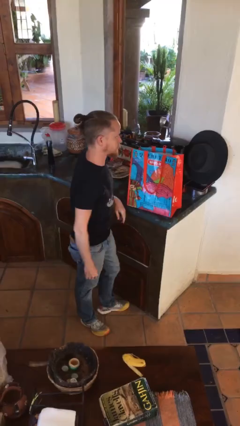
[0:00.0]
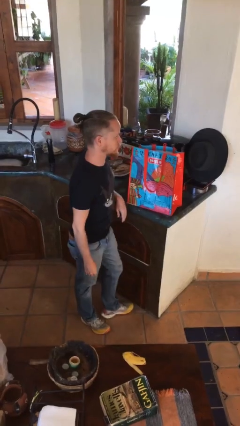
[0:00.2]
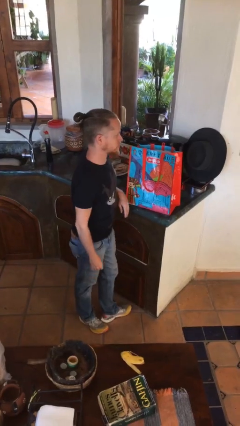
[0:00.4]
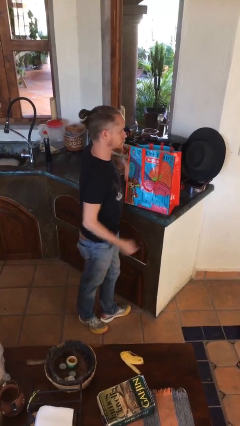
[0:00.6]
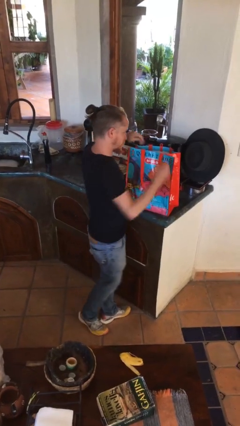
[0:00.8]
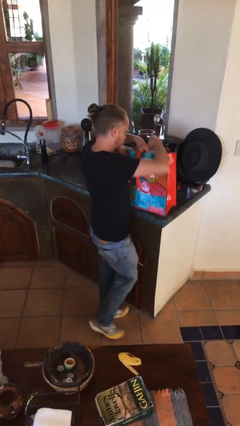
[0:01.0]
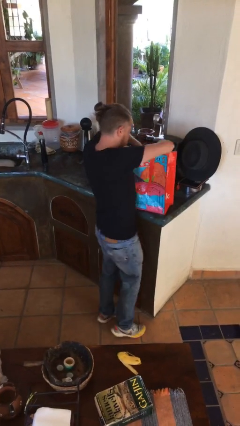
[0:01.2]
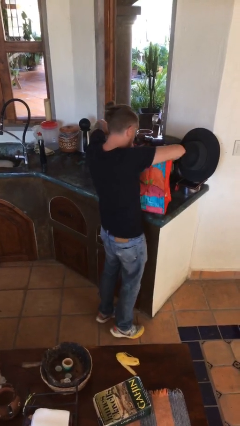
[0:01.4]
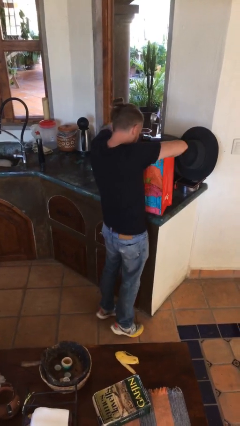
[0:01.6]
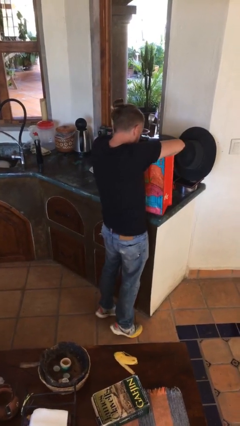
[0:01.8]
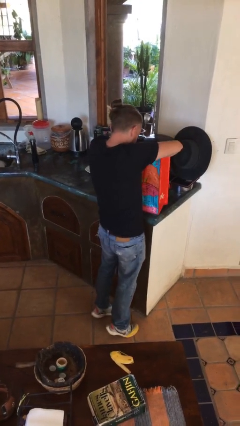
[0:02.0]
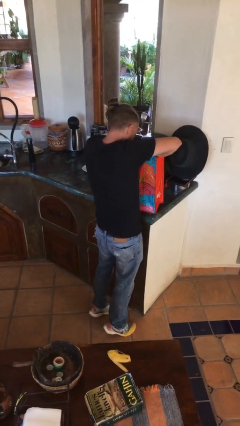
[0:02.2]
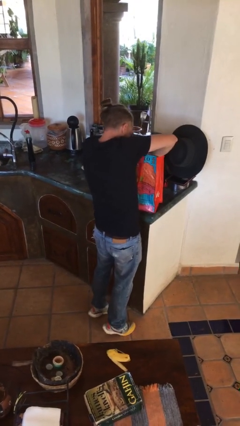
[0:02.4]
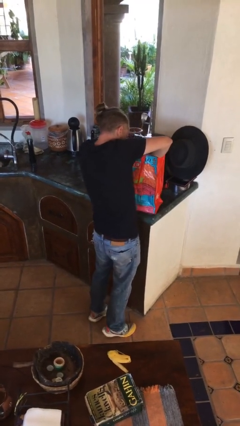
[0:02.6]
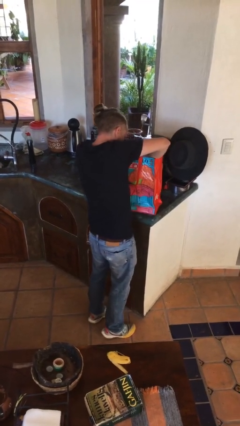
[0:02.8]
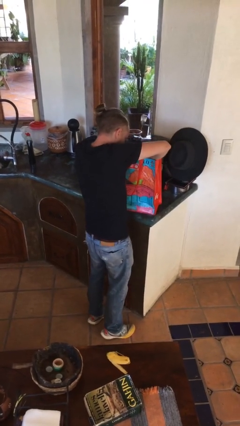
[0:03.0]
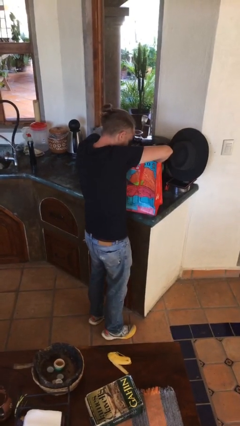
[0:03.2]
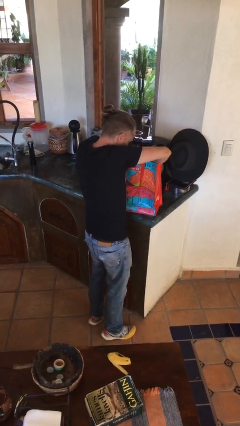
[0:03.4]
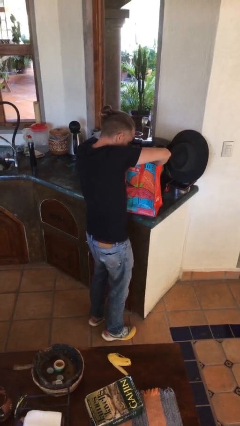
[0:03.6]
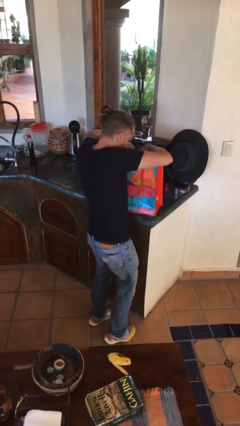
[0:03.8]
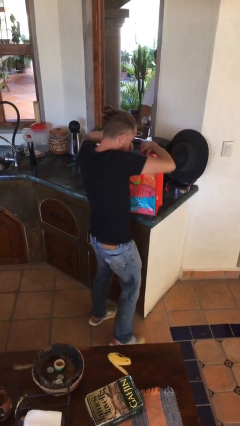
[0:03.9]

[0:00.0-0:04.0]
person searches in bag

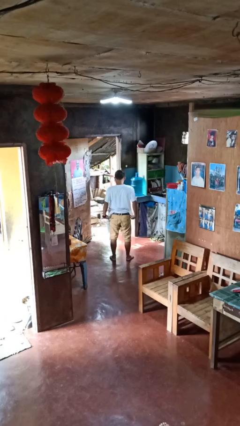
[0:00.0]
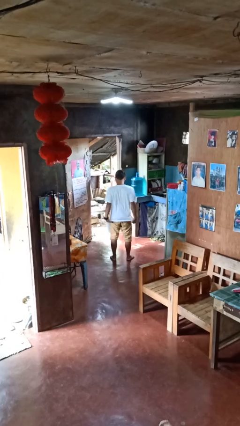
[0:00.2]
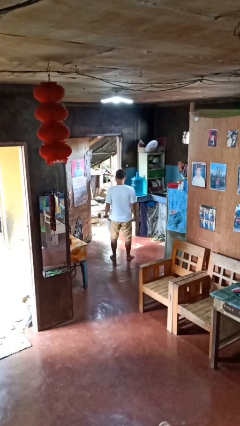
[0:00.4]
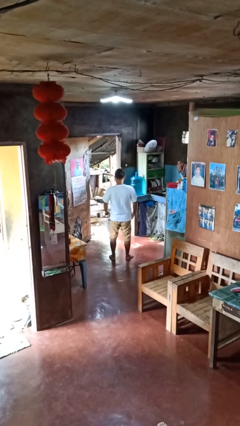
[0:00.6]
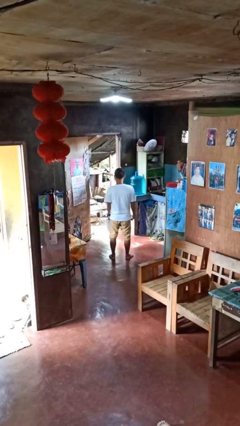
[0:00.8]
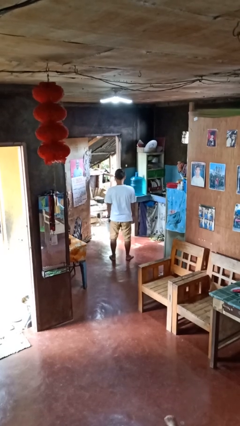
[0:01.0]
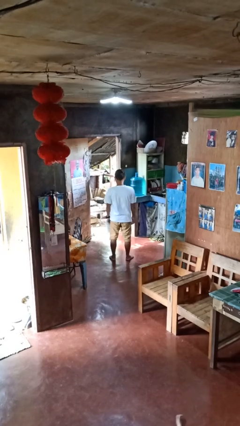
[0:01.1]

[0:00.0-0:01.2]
person untucks shirt

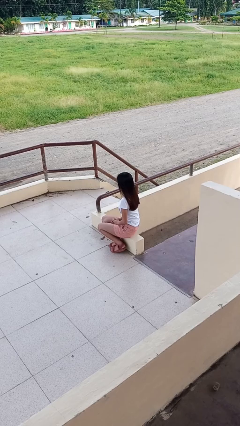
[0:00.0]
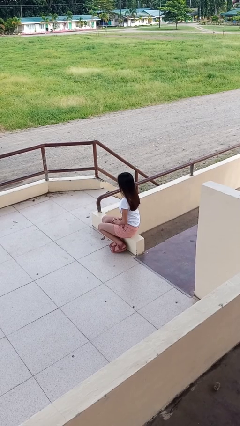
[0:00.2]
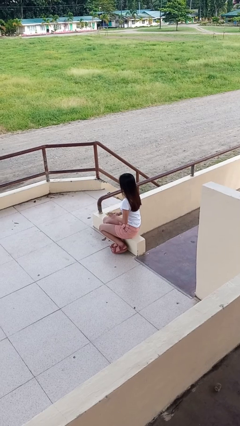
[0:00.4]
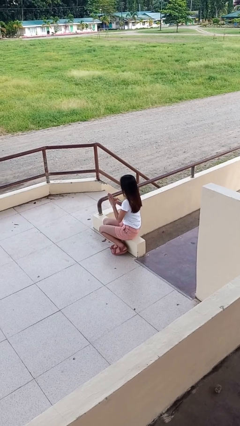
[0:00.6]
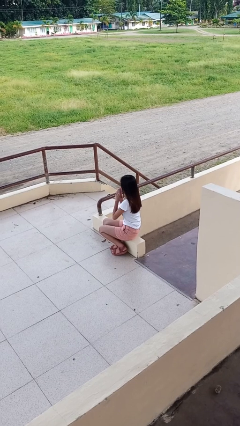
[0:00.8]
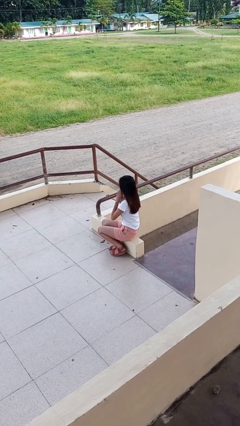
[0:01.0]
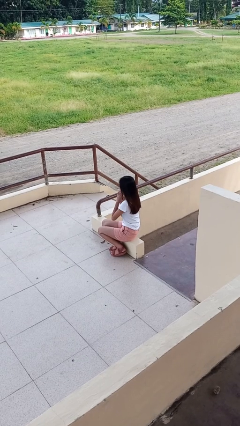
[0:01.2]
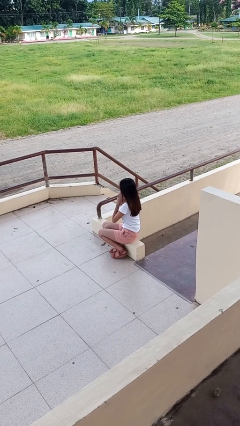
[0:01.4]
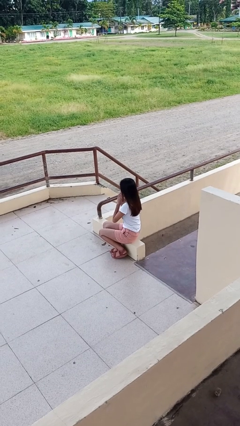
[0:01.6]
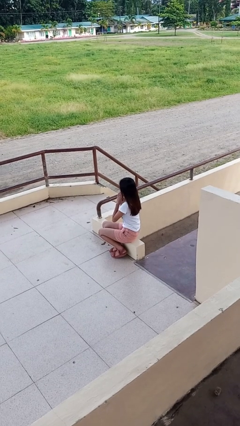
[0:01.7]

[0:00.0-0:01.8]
person prays

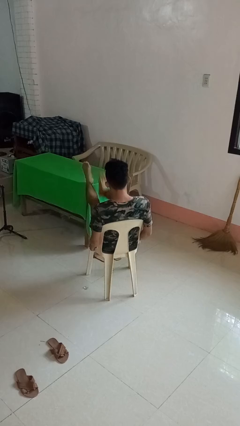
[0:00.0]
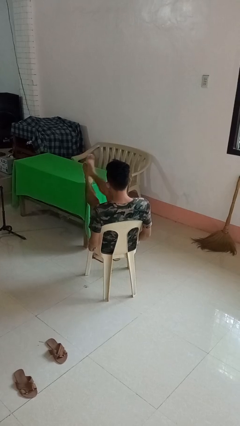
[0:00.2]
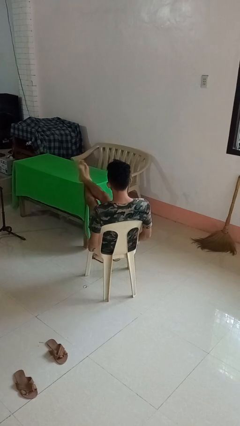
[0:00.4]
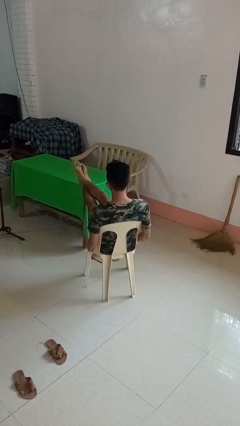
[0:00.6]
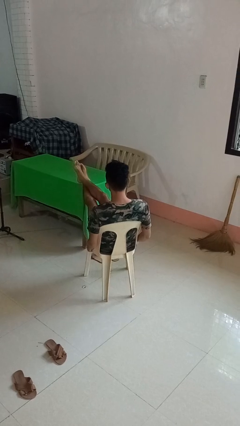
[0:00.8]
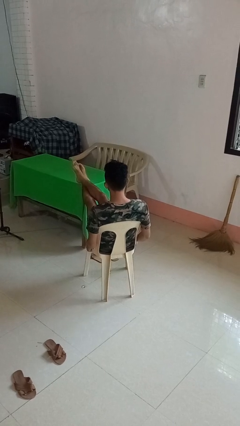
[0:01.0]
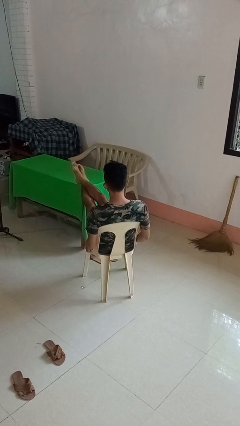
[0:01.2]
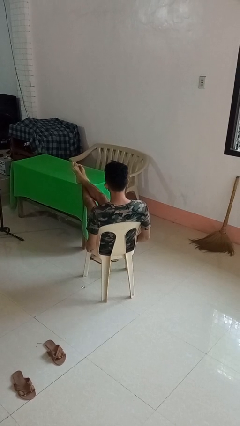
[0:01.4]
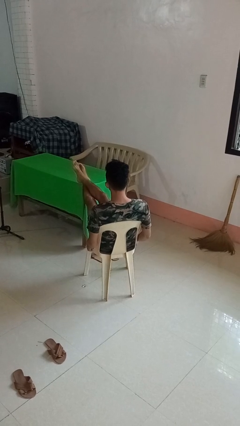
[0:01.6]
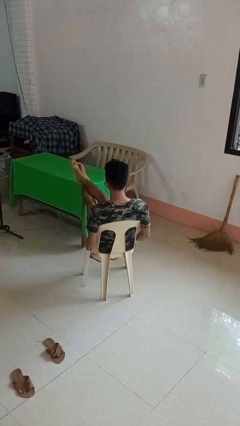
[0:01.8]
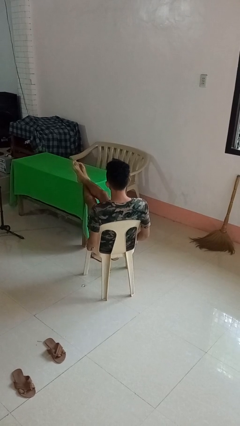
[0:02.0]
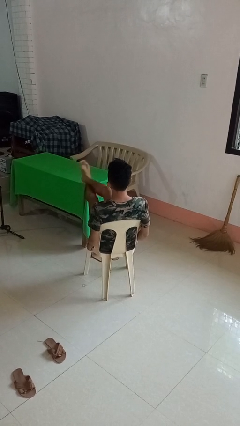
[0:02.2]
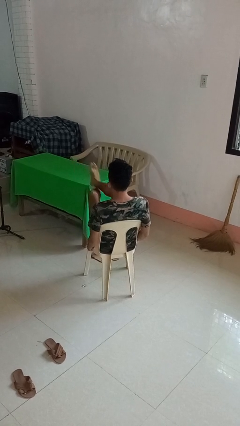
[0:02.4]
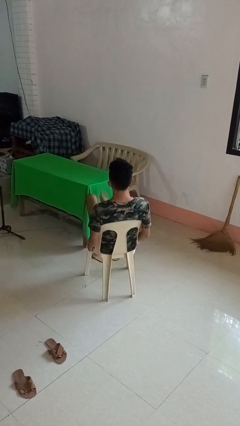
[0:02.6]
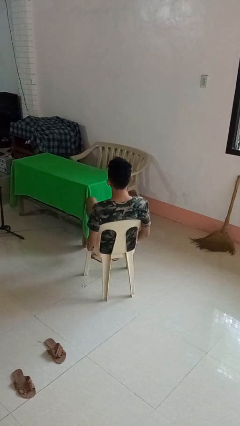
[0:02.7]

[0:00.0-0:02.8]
person puts feet up

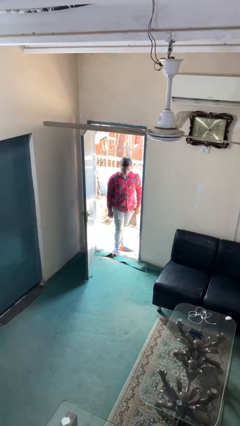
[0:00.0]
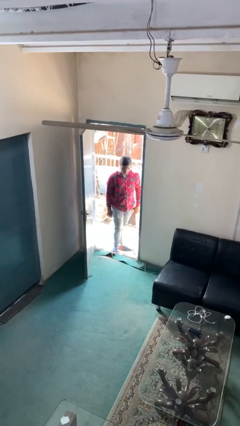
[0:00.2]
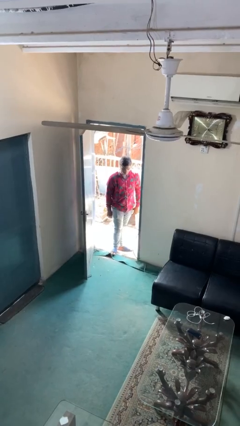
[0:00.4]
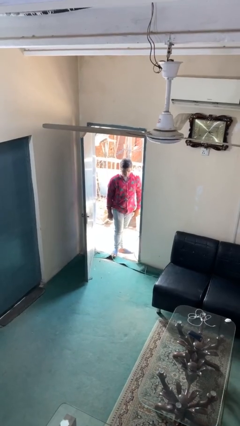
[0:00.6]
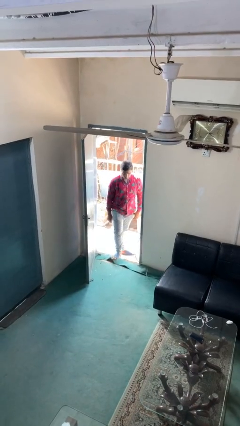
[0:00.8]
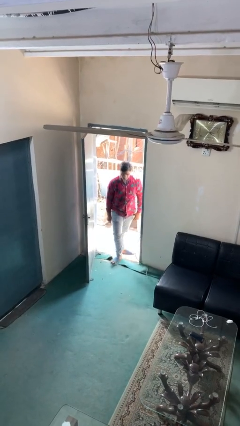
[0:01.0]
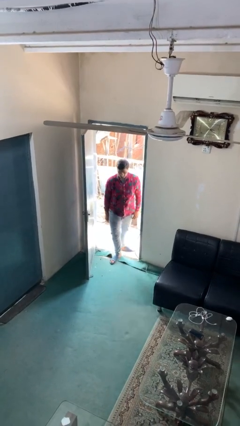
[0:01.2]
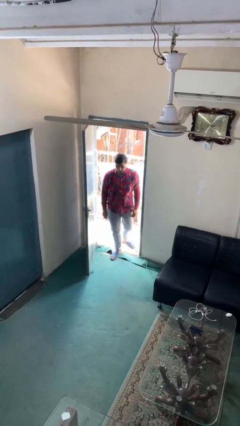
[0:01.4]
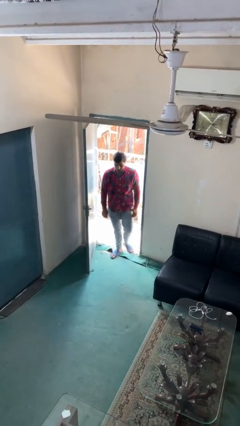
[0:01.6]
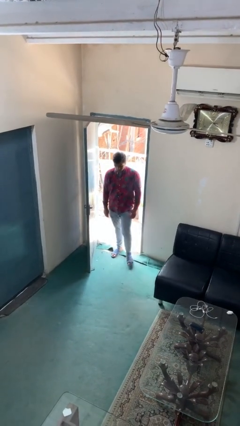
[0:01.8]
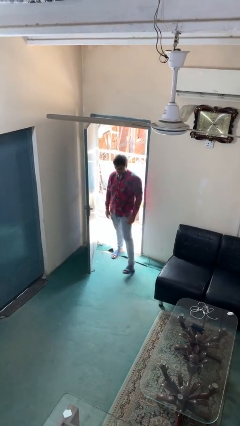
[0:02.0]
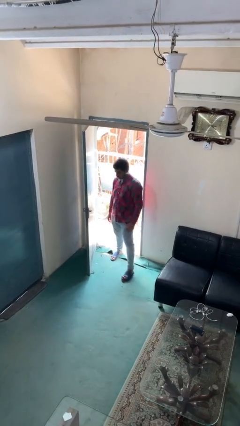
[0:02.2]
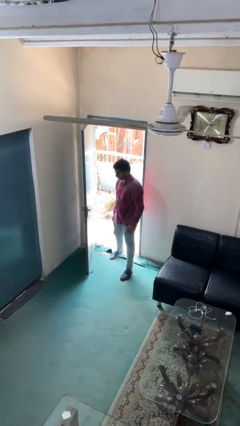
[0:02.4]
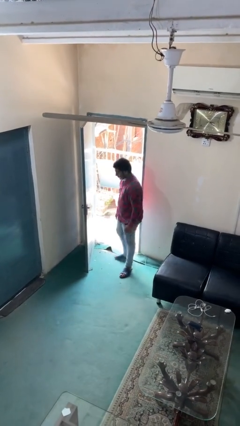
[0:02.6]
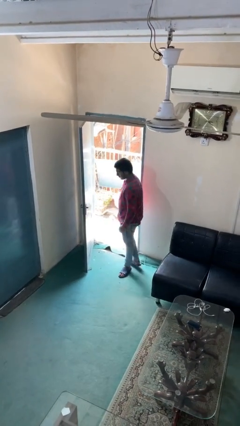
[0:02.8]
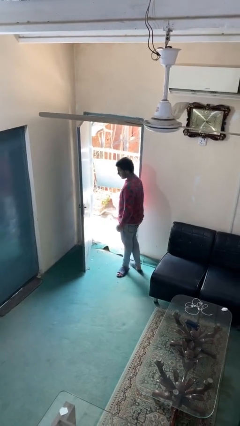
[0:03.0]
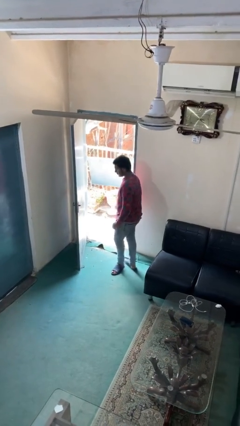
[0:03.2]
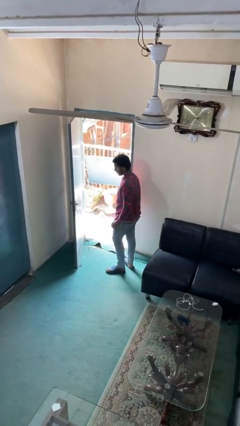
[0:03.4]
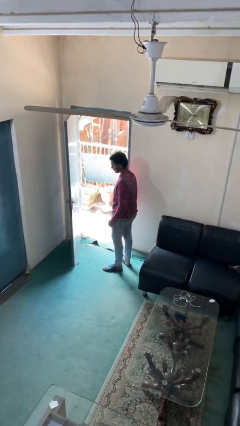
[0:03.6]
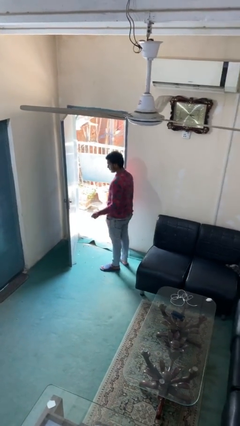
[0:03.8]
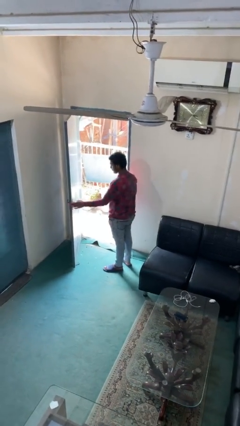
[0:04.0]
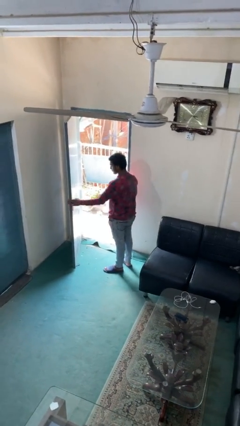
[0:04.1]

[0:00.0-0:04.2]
person enters scene through structure

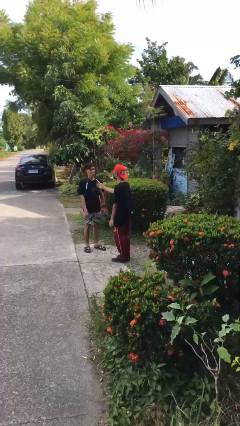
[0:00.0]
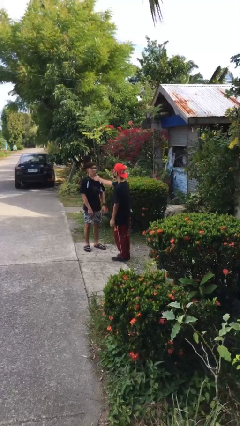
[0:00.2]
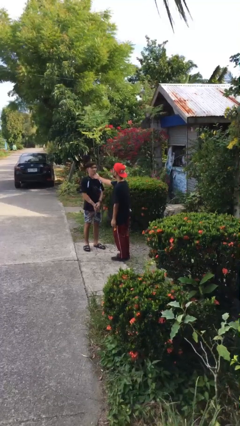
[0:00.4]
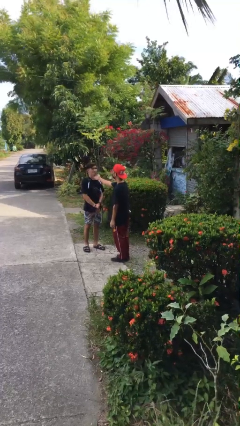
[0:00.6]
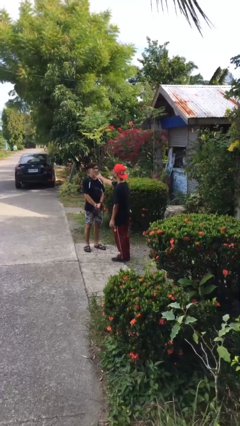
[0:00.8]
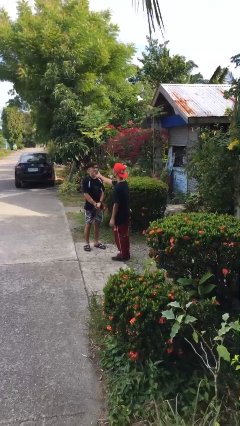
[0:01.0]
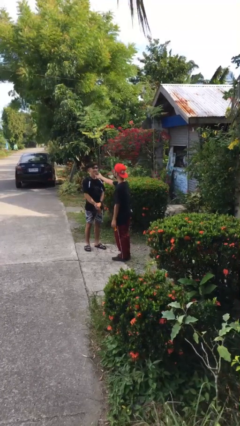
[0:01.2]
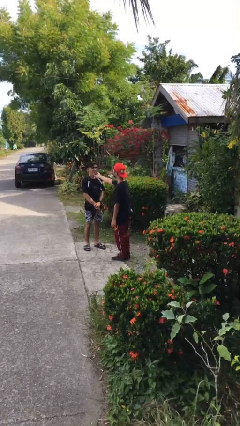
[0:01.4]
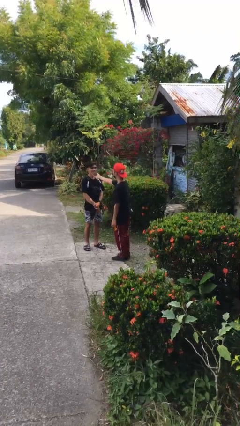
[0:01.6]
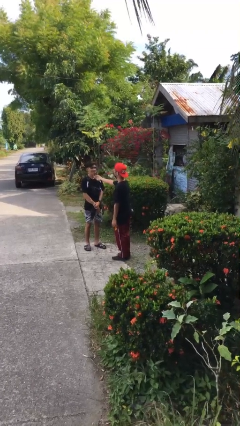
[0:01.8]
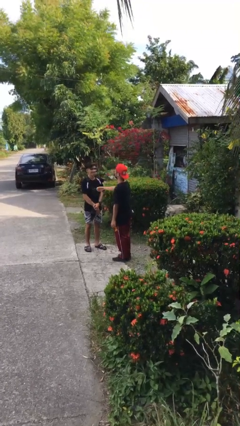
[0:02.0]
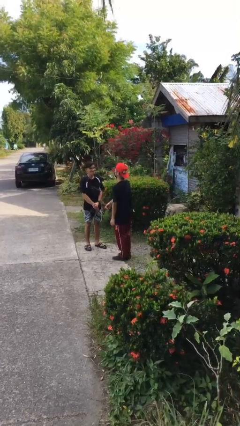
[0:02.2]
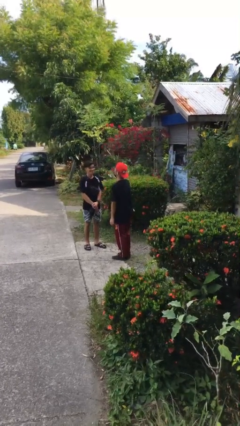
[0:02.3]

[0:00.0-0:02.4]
person touches face of person

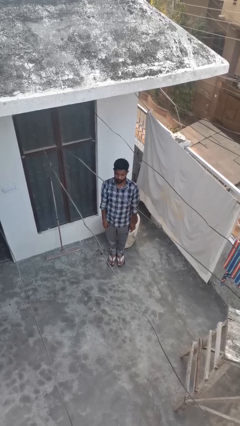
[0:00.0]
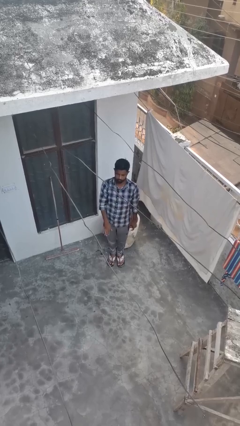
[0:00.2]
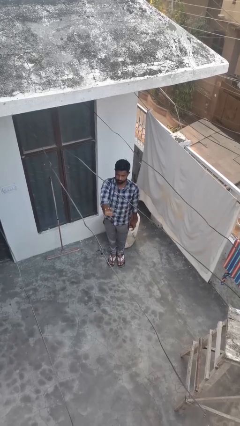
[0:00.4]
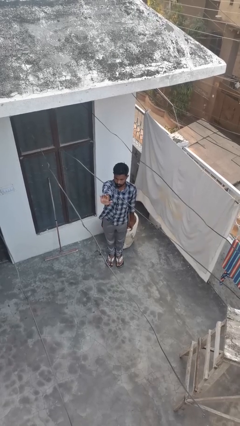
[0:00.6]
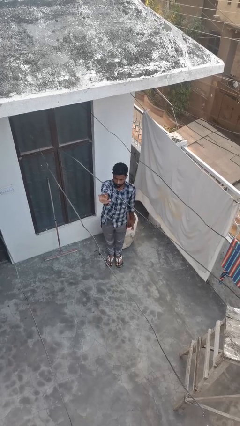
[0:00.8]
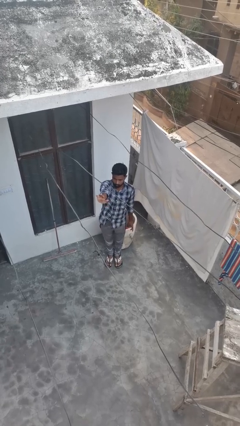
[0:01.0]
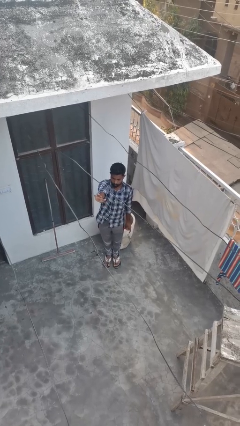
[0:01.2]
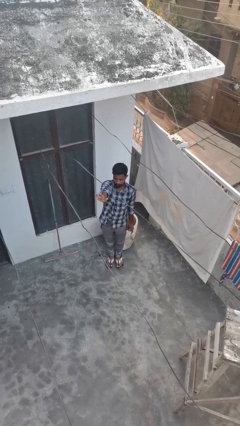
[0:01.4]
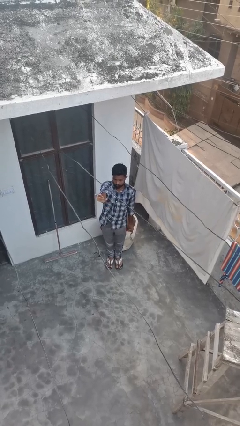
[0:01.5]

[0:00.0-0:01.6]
person gestures stop
